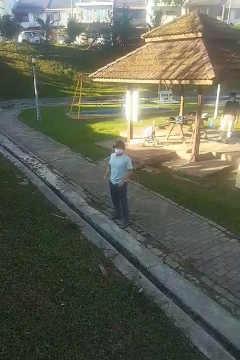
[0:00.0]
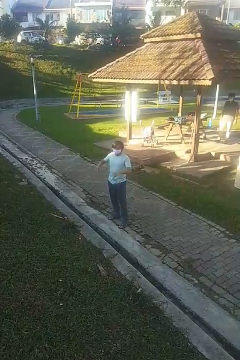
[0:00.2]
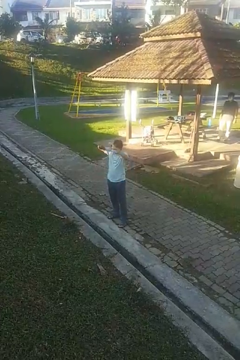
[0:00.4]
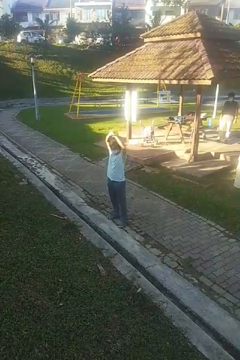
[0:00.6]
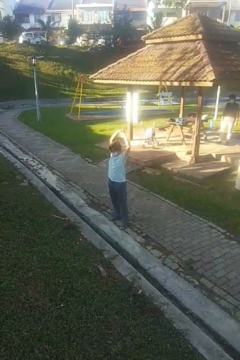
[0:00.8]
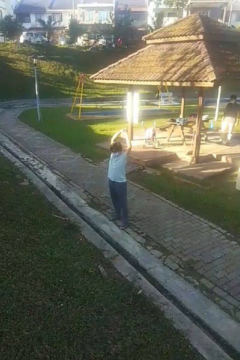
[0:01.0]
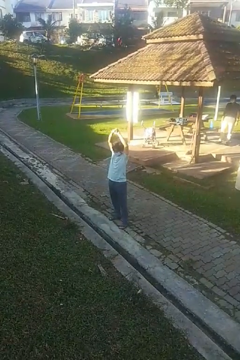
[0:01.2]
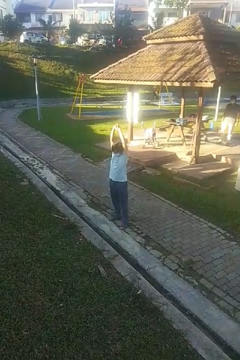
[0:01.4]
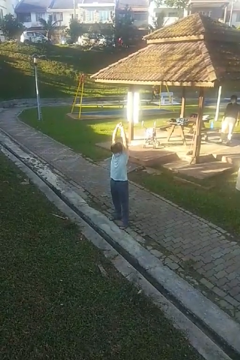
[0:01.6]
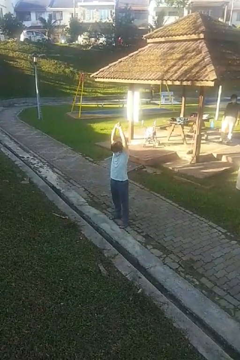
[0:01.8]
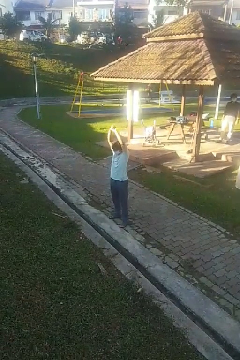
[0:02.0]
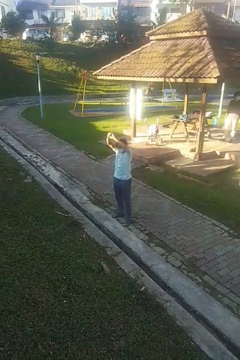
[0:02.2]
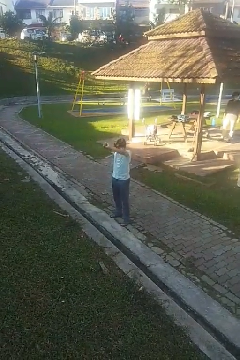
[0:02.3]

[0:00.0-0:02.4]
person stretches arms over head

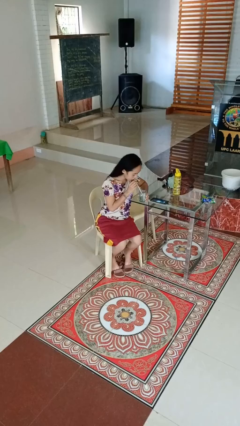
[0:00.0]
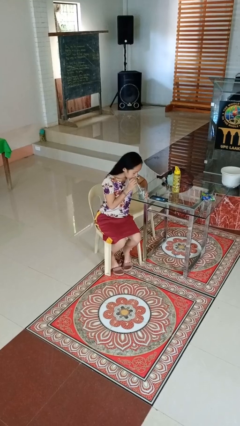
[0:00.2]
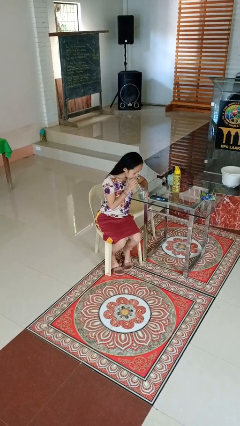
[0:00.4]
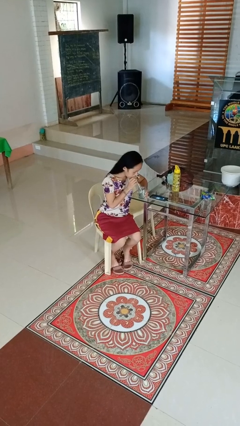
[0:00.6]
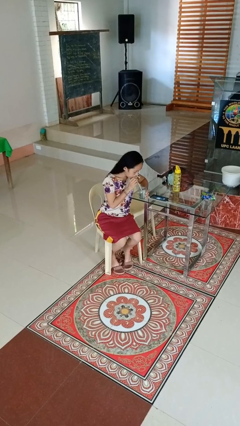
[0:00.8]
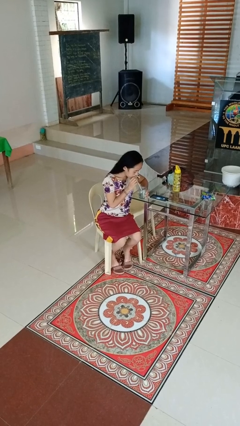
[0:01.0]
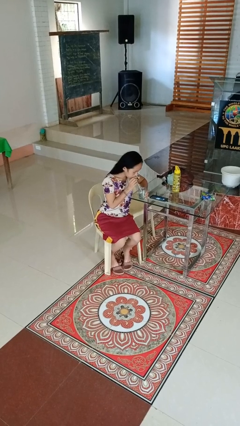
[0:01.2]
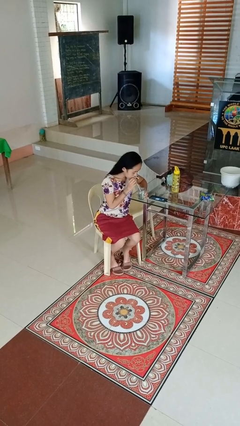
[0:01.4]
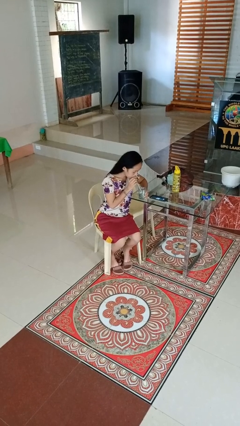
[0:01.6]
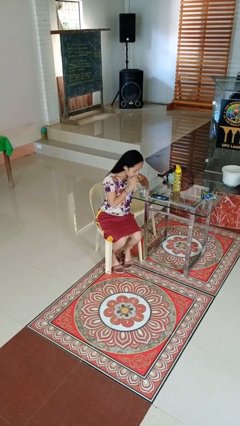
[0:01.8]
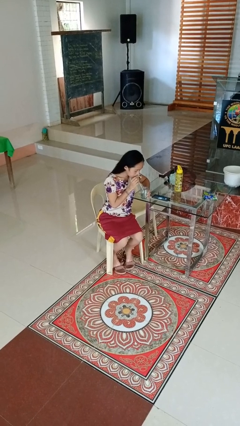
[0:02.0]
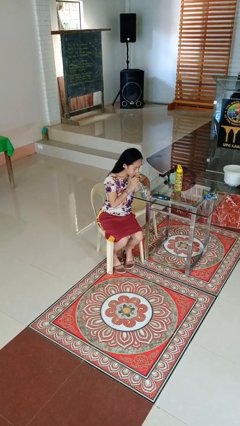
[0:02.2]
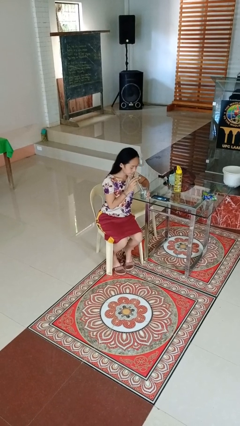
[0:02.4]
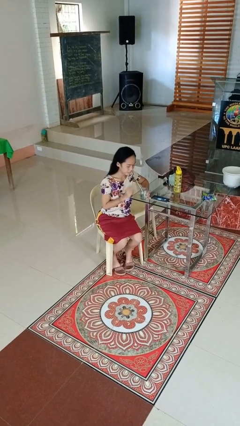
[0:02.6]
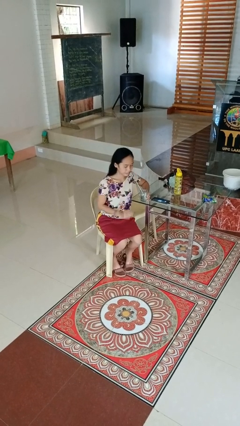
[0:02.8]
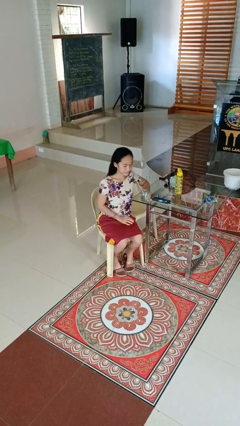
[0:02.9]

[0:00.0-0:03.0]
person drinks from straw

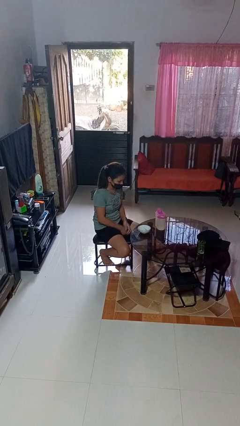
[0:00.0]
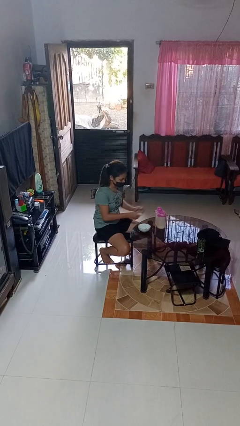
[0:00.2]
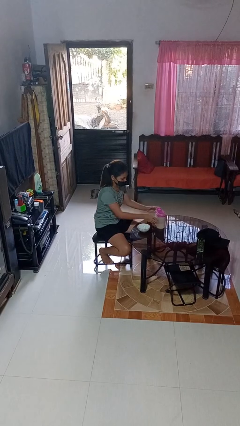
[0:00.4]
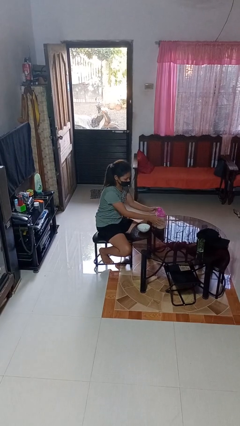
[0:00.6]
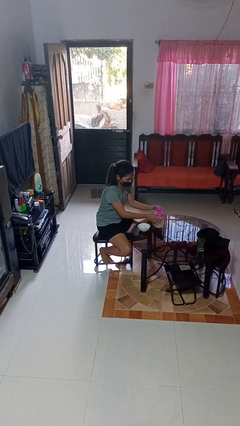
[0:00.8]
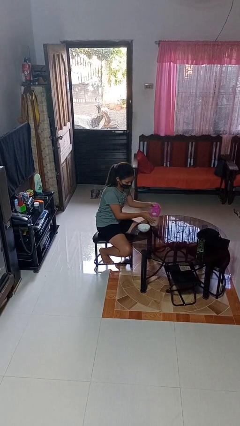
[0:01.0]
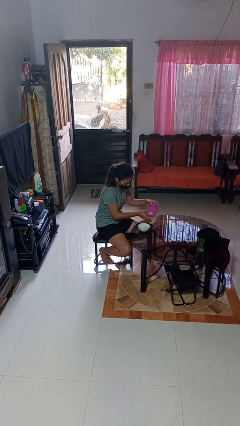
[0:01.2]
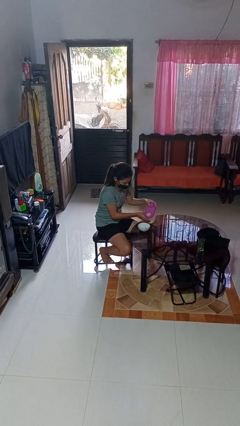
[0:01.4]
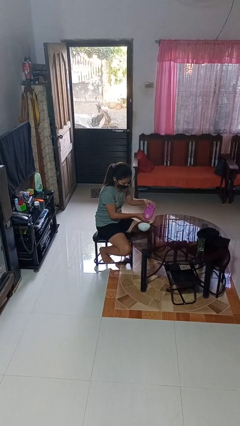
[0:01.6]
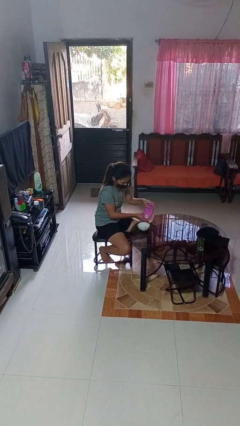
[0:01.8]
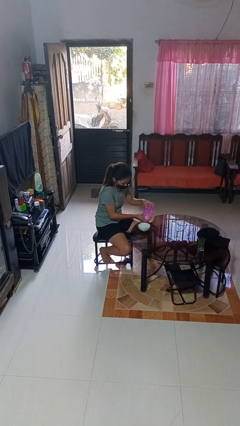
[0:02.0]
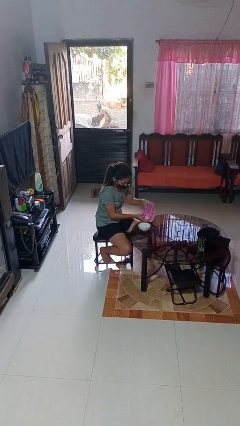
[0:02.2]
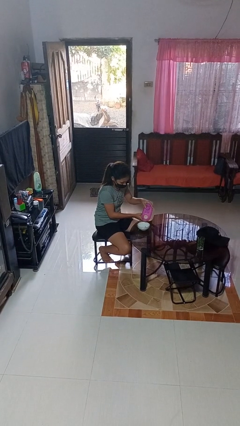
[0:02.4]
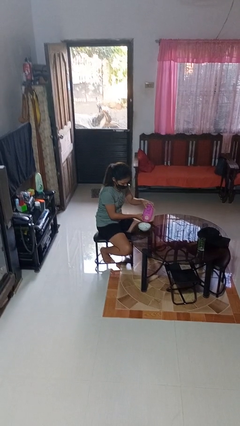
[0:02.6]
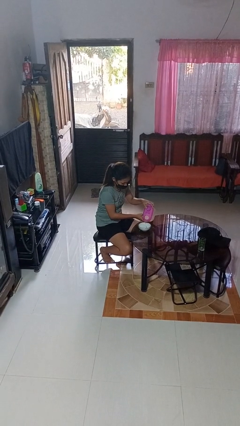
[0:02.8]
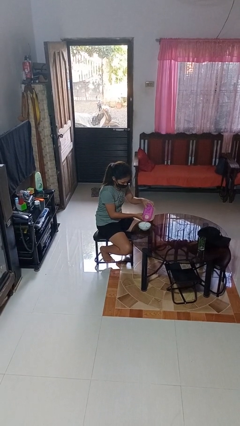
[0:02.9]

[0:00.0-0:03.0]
person pours into bowl

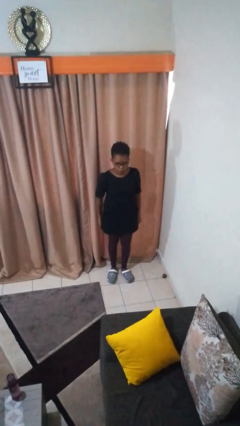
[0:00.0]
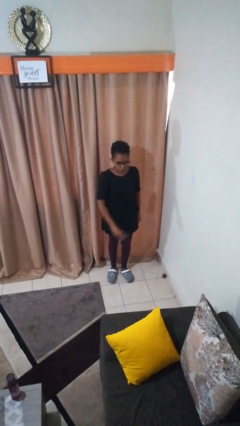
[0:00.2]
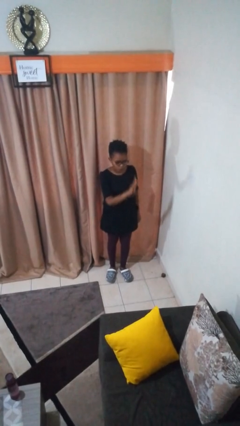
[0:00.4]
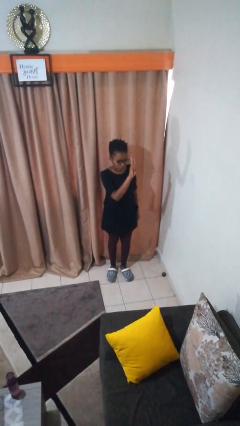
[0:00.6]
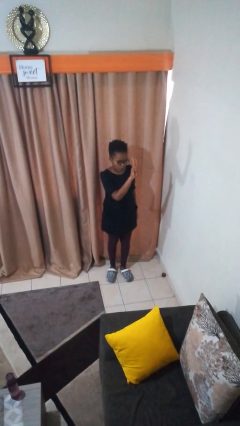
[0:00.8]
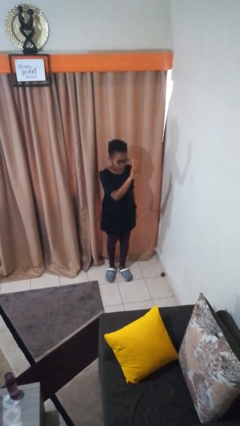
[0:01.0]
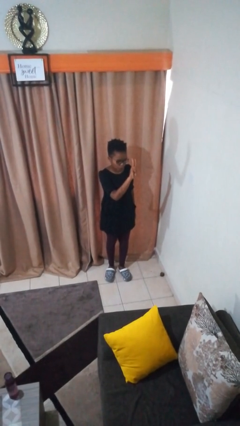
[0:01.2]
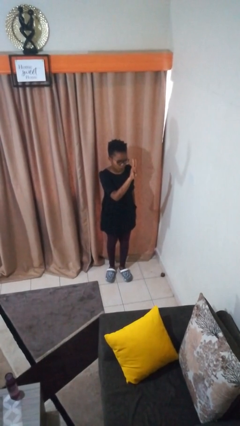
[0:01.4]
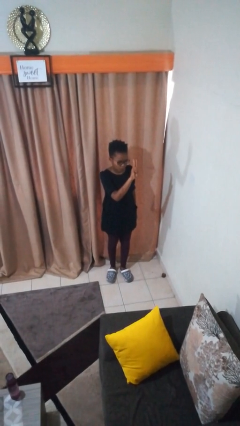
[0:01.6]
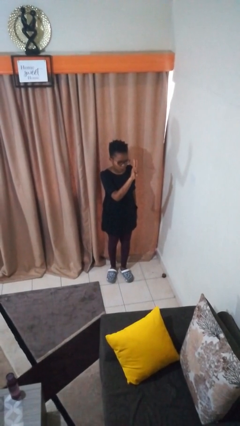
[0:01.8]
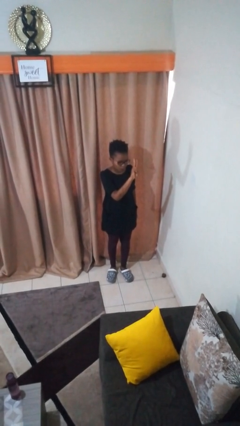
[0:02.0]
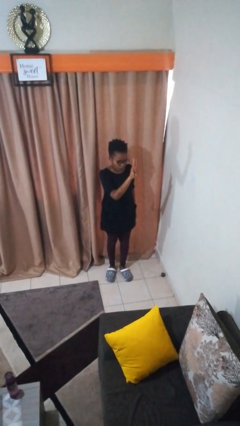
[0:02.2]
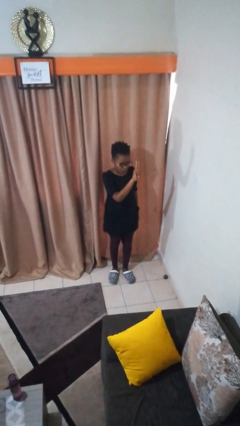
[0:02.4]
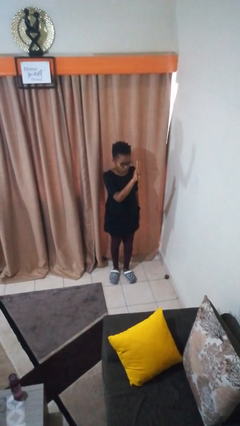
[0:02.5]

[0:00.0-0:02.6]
person gestures number three

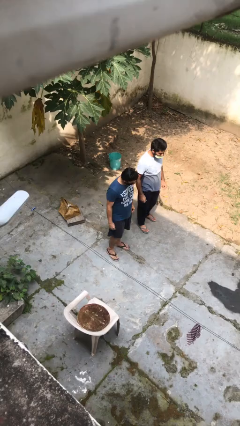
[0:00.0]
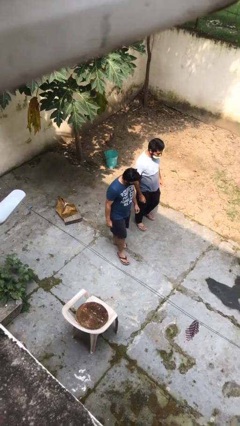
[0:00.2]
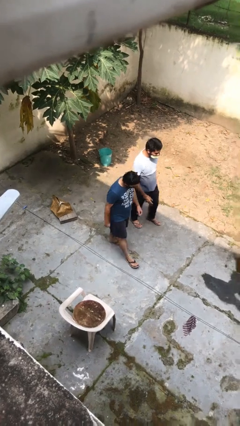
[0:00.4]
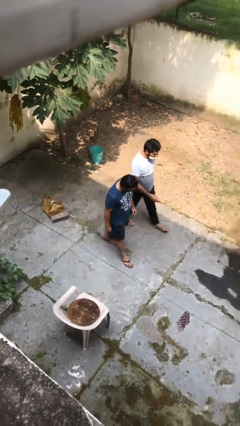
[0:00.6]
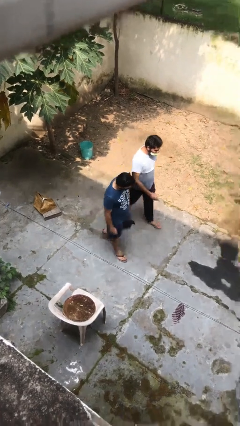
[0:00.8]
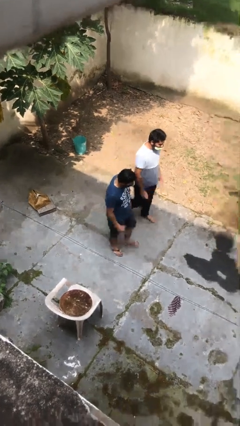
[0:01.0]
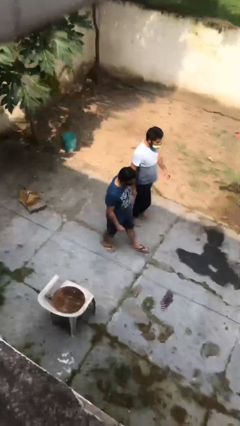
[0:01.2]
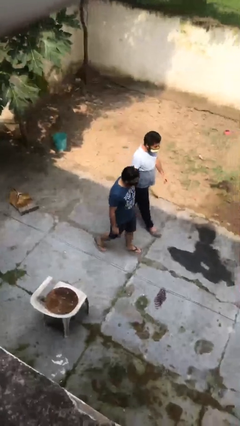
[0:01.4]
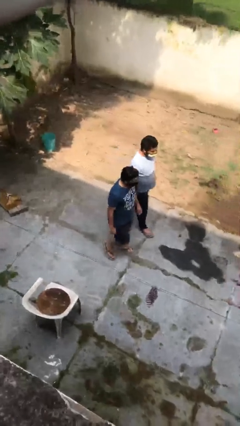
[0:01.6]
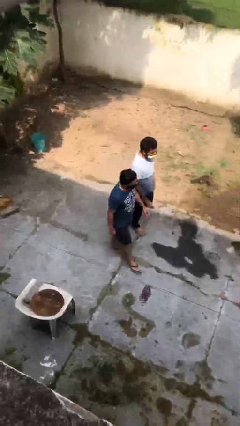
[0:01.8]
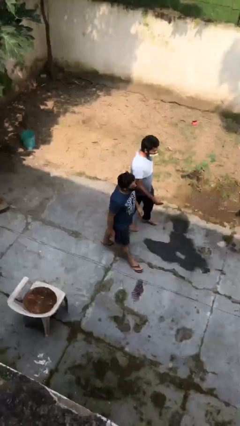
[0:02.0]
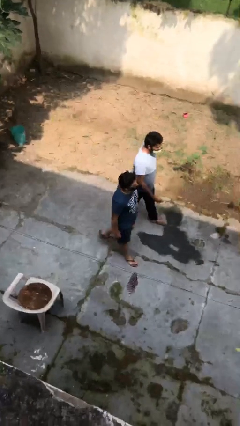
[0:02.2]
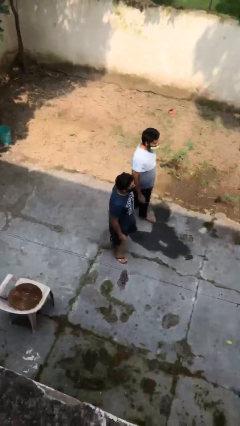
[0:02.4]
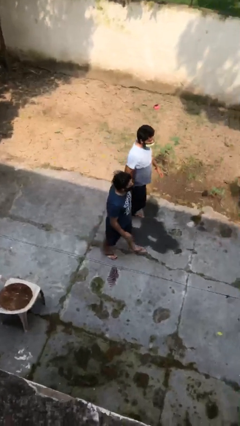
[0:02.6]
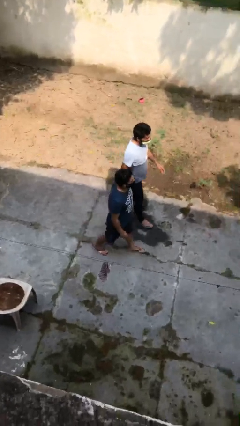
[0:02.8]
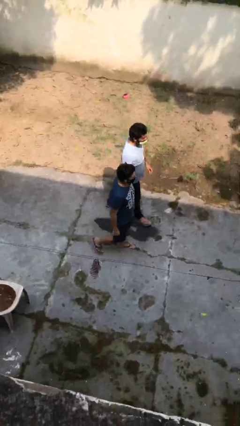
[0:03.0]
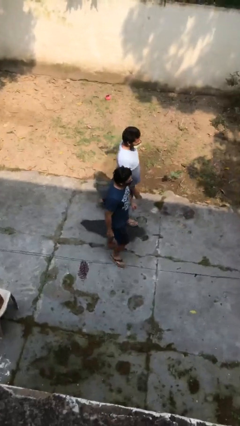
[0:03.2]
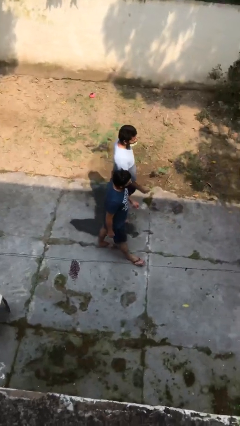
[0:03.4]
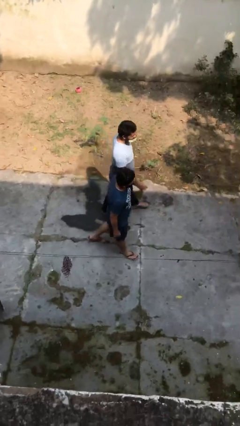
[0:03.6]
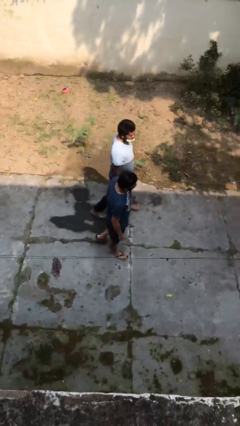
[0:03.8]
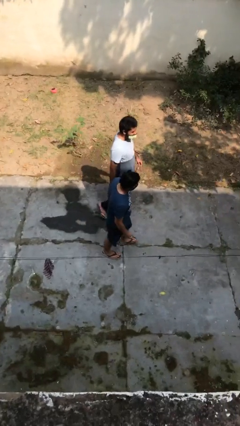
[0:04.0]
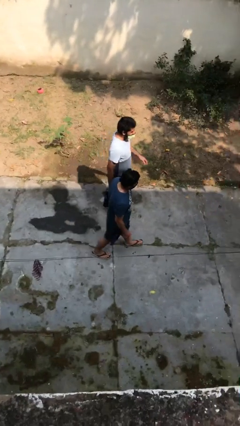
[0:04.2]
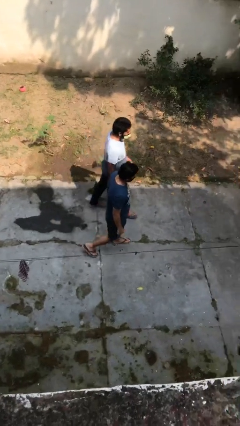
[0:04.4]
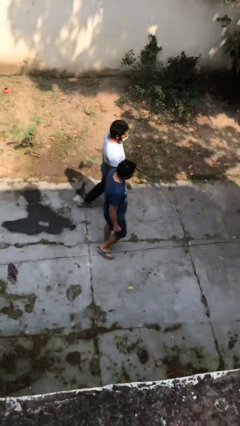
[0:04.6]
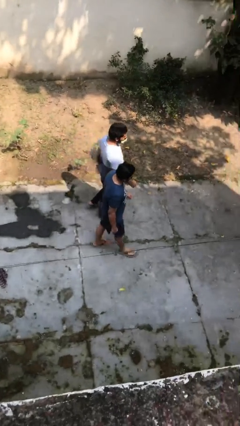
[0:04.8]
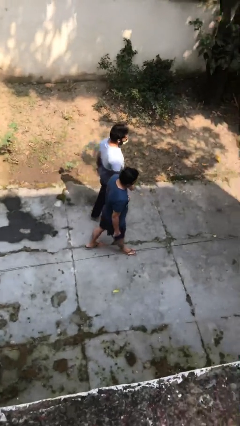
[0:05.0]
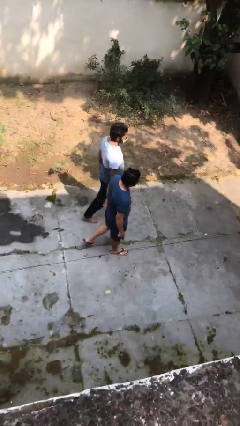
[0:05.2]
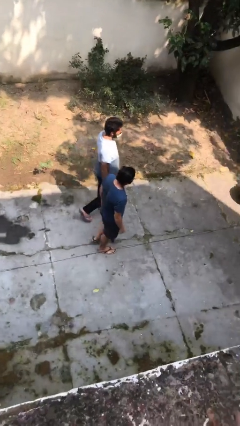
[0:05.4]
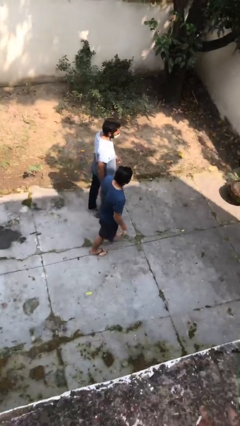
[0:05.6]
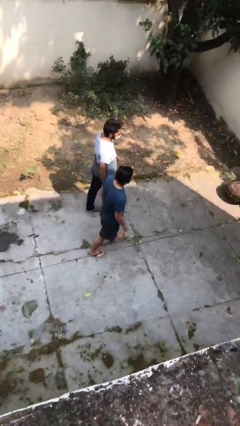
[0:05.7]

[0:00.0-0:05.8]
person talks to person

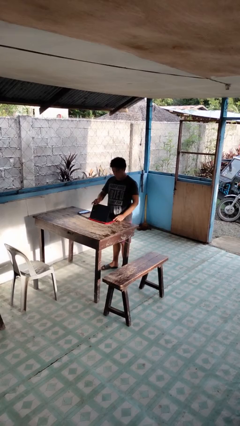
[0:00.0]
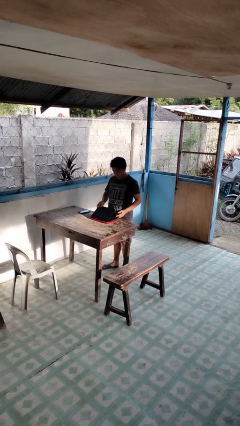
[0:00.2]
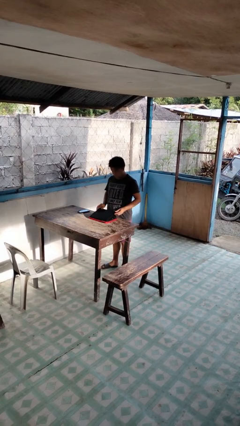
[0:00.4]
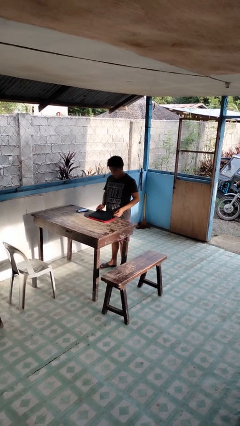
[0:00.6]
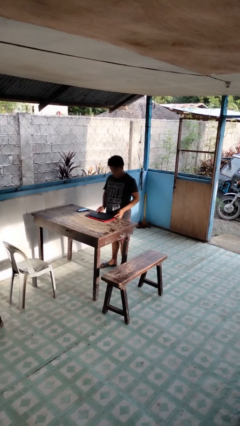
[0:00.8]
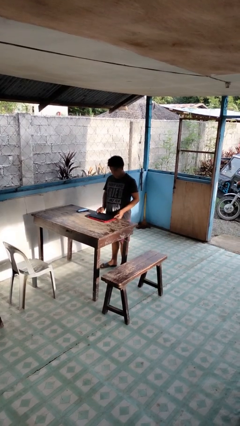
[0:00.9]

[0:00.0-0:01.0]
person closes laptop
